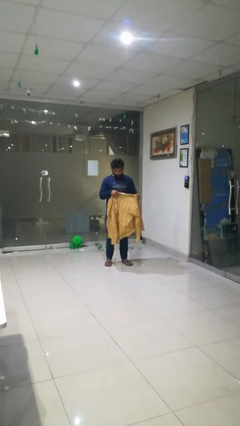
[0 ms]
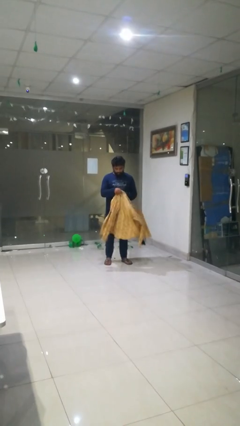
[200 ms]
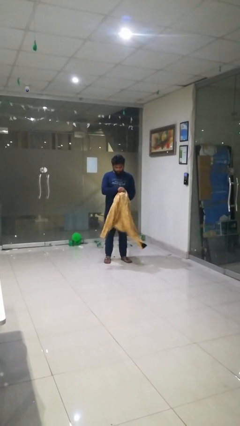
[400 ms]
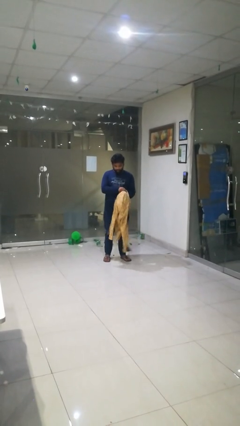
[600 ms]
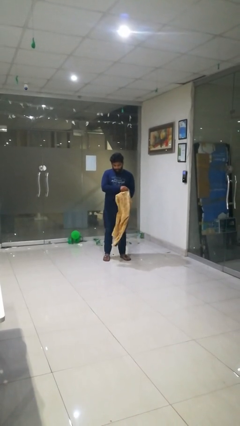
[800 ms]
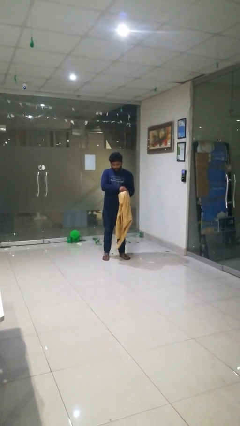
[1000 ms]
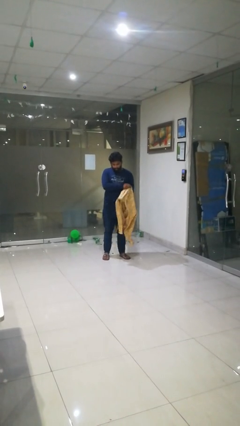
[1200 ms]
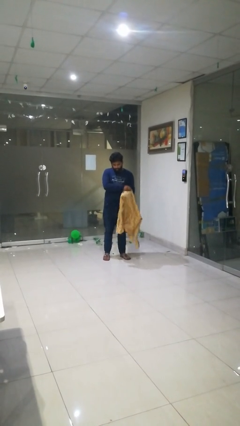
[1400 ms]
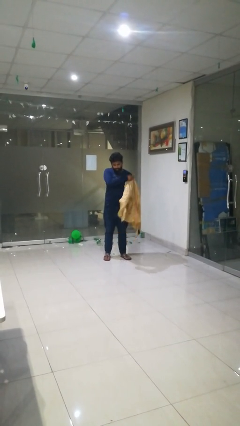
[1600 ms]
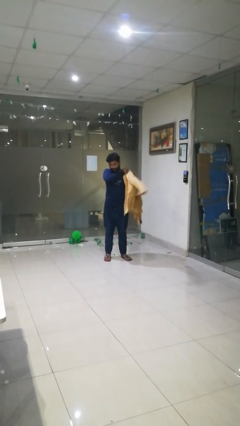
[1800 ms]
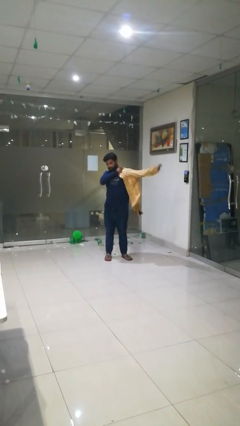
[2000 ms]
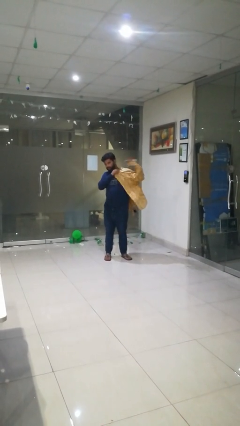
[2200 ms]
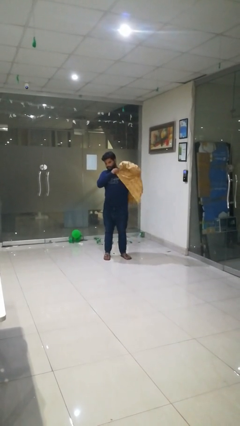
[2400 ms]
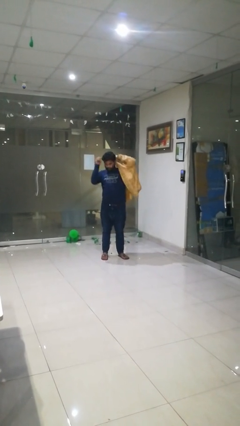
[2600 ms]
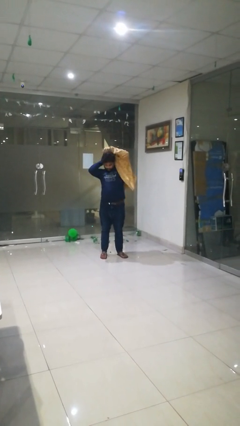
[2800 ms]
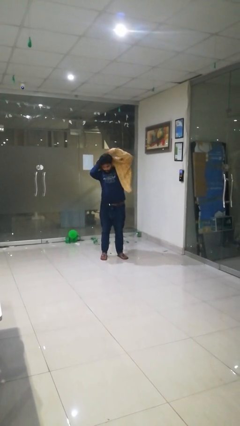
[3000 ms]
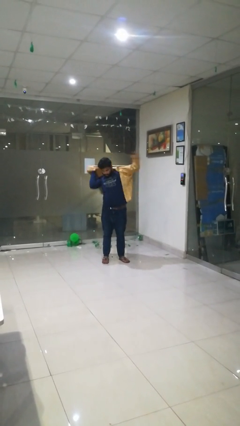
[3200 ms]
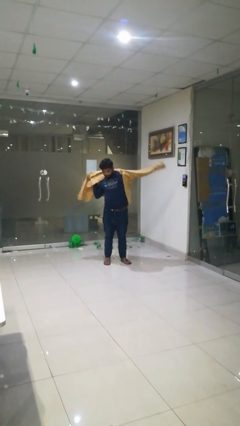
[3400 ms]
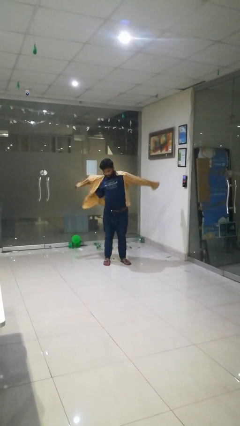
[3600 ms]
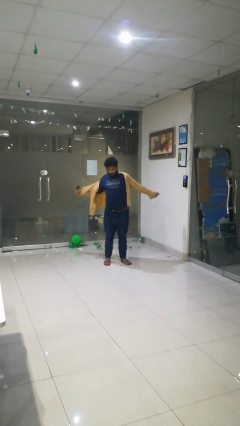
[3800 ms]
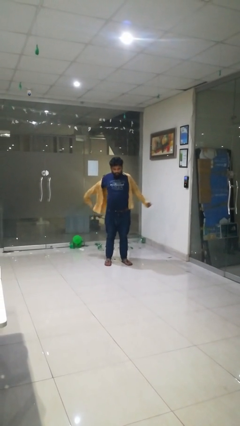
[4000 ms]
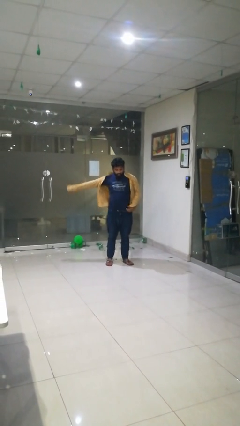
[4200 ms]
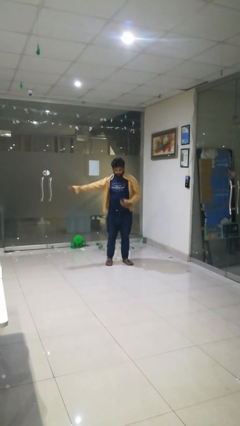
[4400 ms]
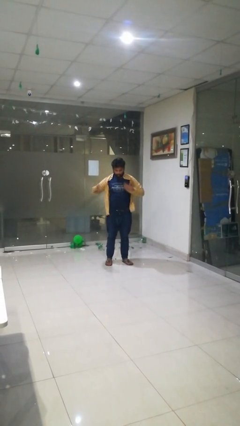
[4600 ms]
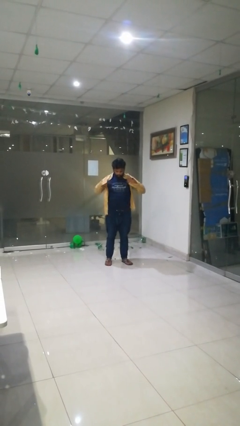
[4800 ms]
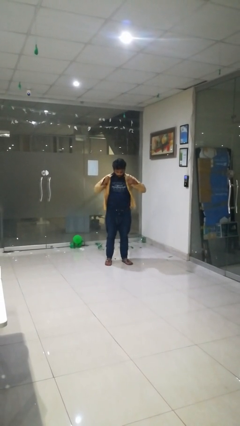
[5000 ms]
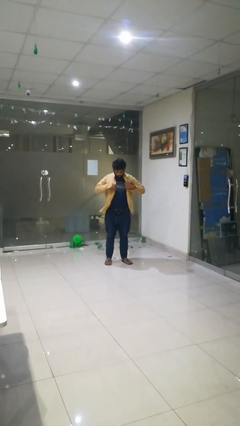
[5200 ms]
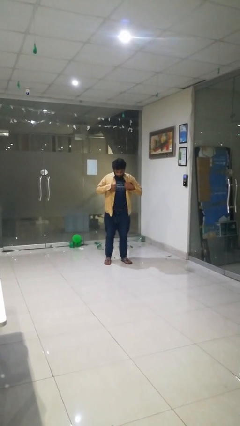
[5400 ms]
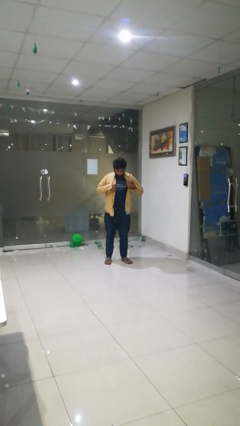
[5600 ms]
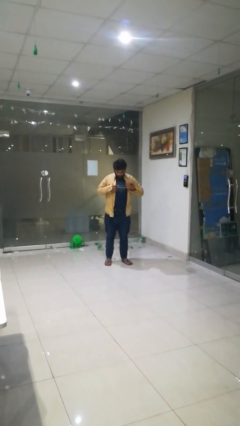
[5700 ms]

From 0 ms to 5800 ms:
person puts on shirt

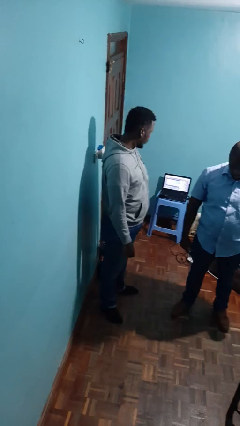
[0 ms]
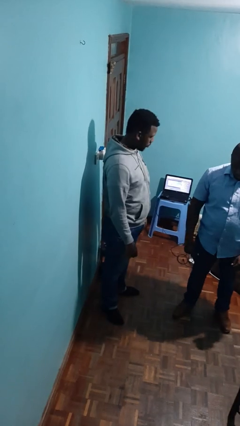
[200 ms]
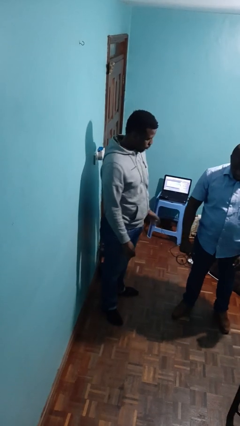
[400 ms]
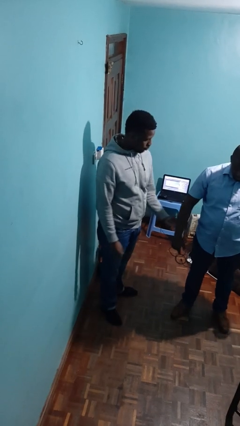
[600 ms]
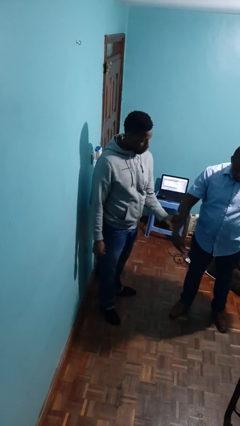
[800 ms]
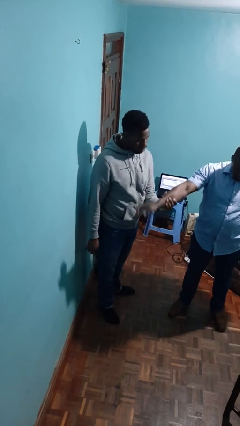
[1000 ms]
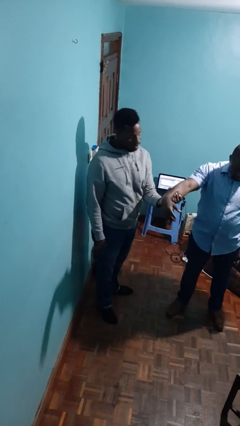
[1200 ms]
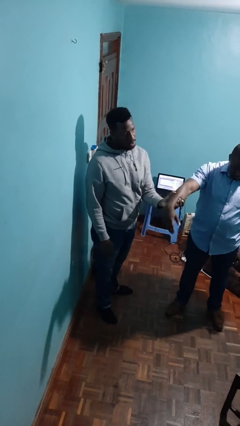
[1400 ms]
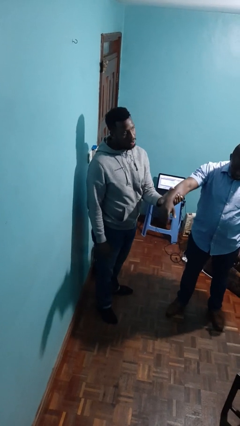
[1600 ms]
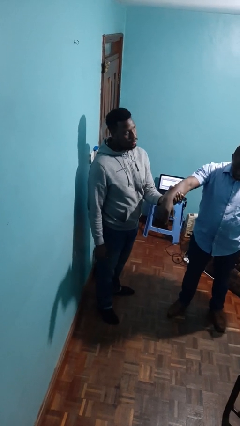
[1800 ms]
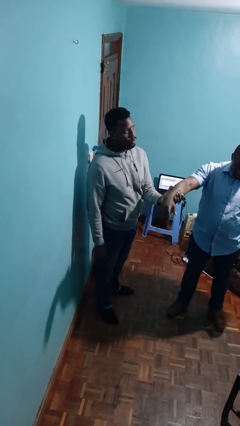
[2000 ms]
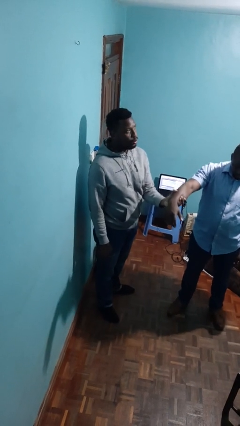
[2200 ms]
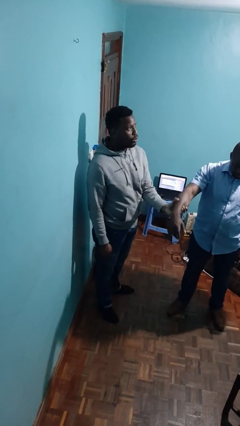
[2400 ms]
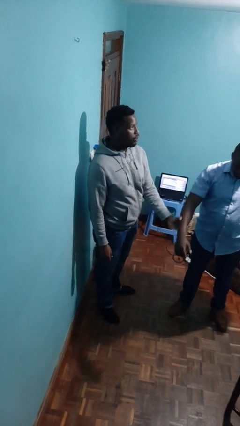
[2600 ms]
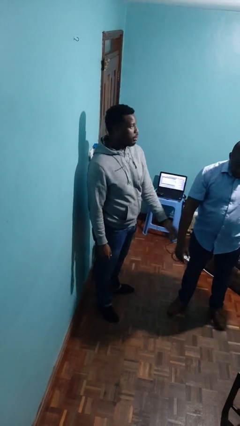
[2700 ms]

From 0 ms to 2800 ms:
person grabs person by forearm

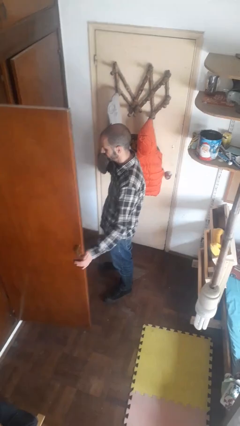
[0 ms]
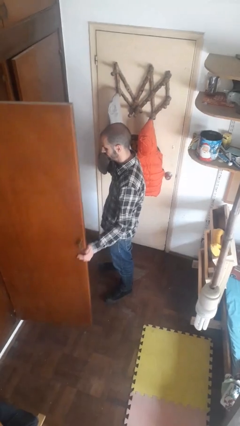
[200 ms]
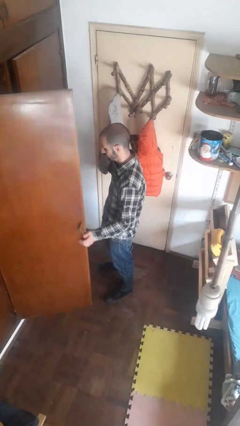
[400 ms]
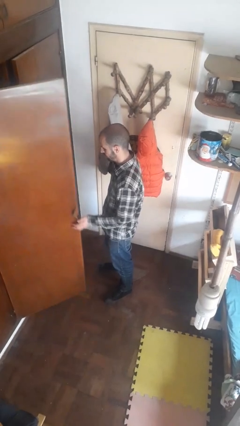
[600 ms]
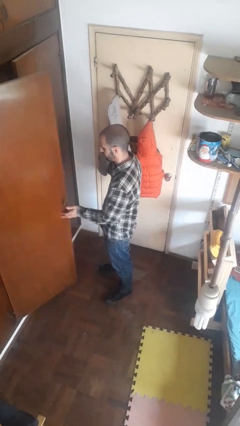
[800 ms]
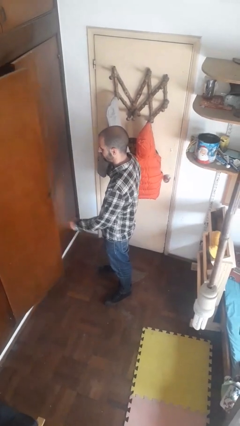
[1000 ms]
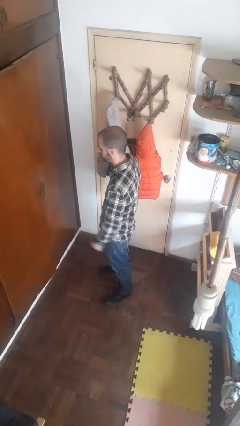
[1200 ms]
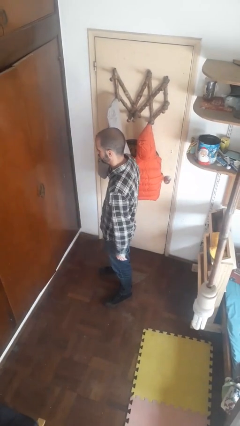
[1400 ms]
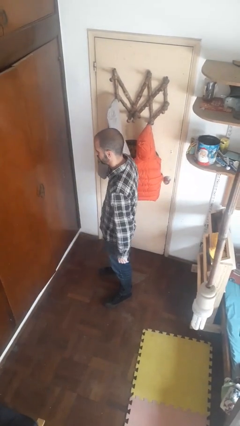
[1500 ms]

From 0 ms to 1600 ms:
person closes closet door

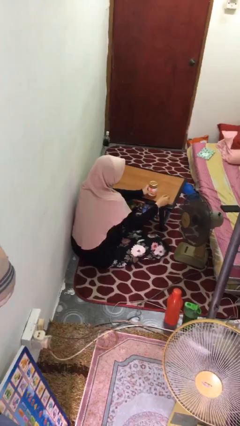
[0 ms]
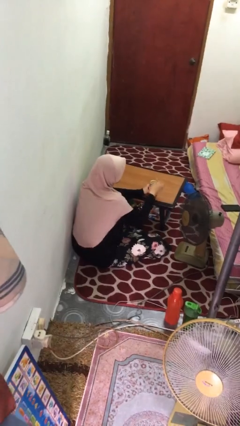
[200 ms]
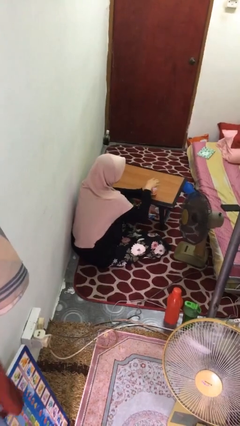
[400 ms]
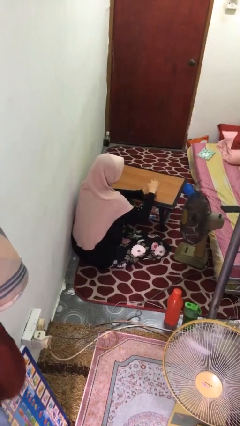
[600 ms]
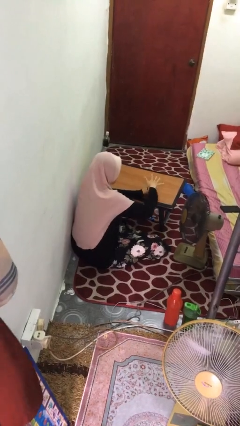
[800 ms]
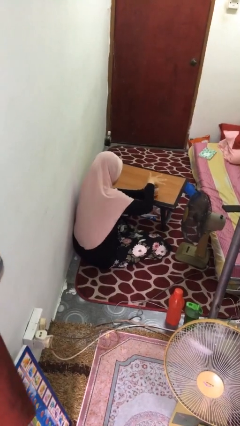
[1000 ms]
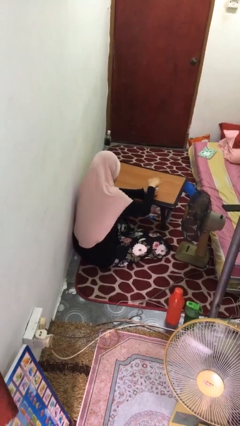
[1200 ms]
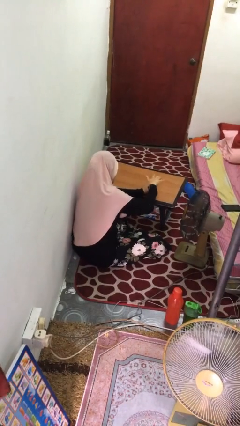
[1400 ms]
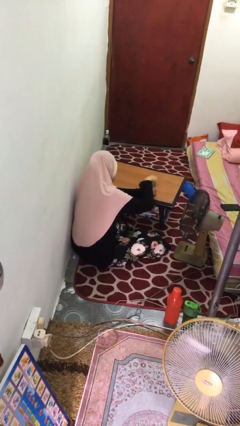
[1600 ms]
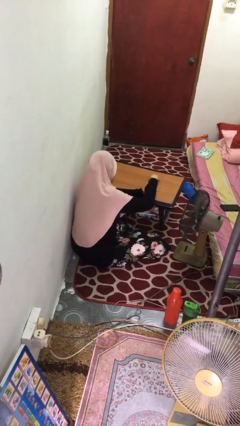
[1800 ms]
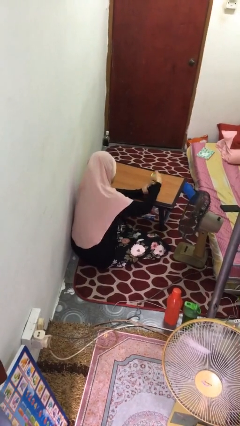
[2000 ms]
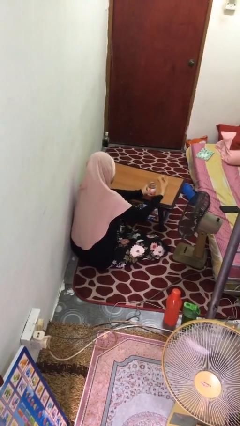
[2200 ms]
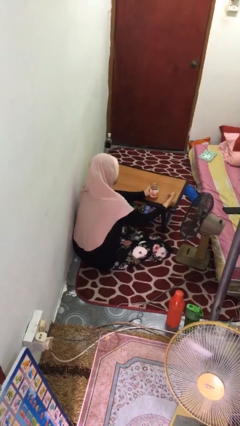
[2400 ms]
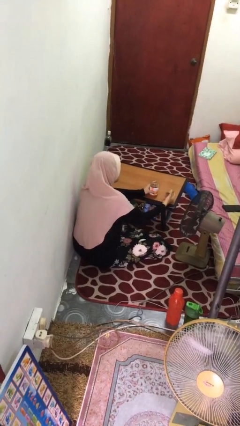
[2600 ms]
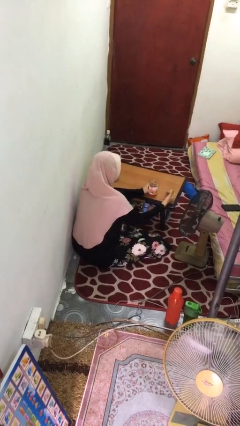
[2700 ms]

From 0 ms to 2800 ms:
person opens jar

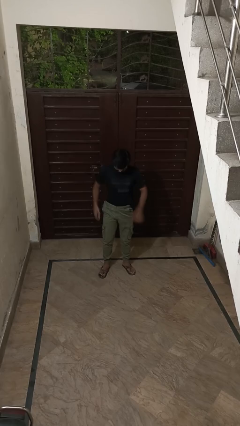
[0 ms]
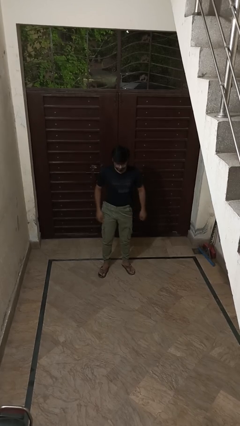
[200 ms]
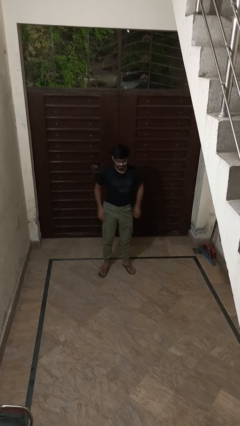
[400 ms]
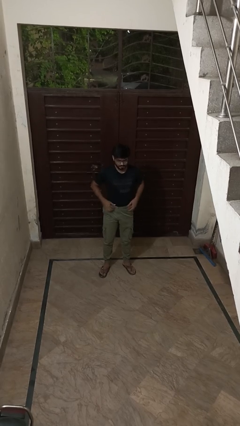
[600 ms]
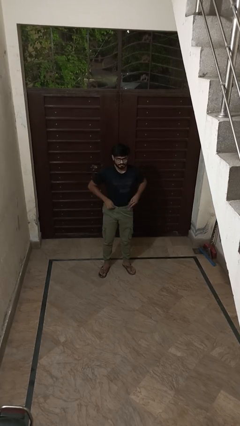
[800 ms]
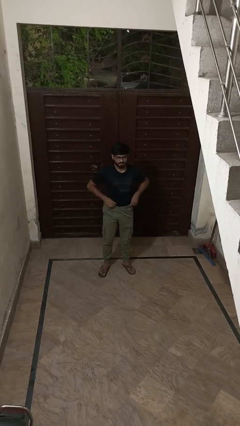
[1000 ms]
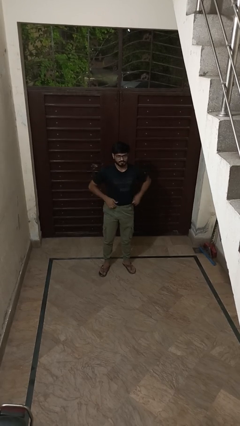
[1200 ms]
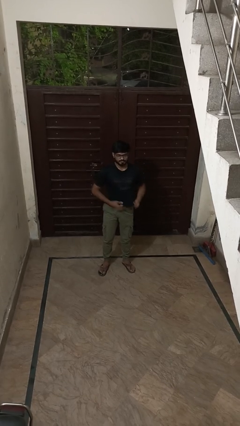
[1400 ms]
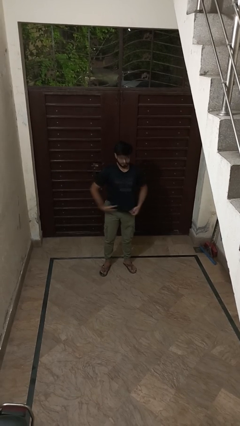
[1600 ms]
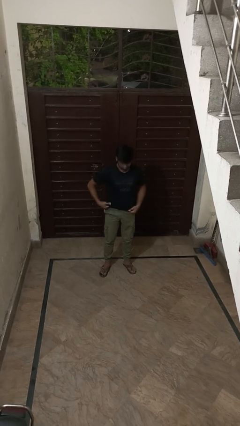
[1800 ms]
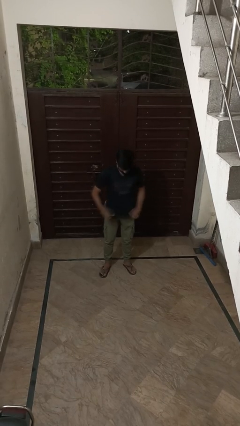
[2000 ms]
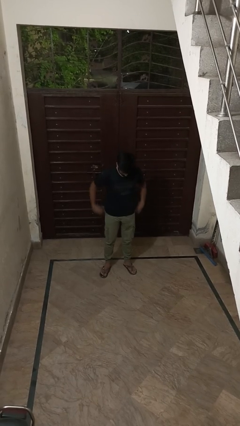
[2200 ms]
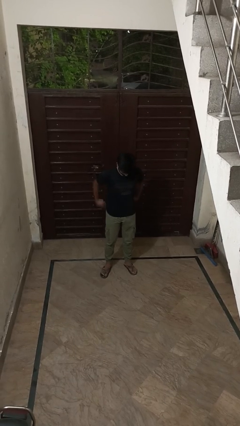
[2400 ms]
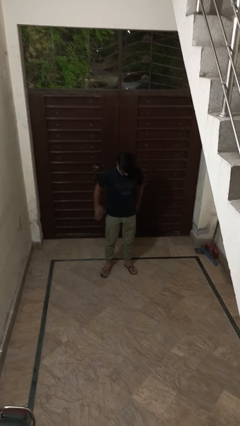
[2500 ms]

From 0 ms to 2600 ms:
person untucks shirt

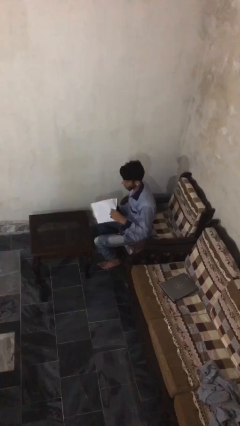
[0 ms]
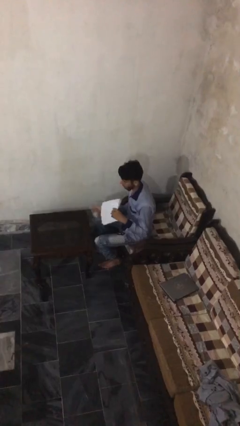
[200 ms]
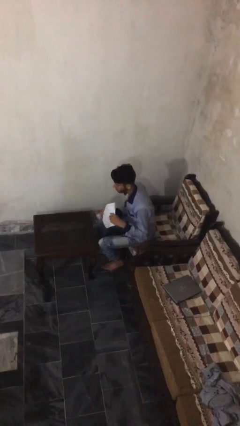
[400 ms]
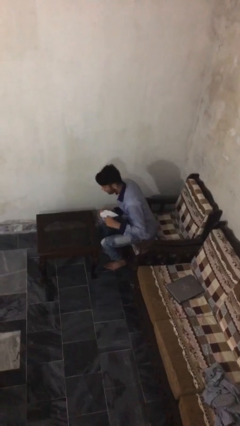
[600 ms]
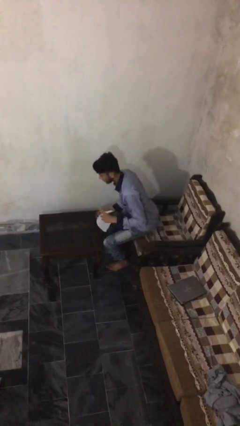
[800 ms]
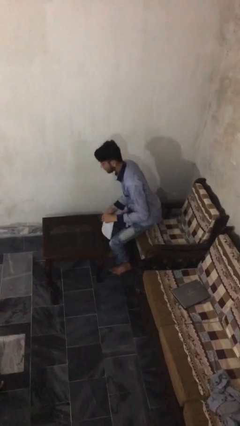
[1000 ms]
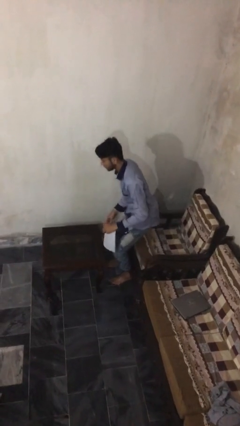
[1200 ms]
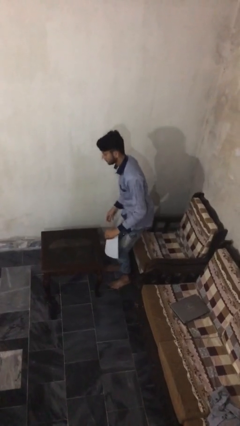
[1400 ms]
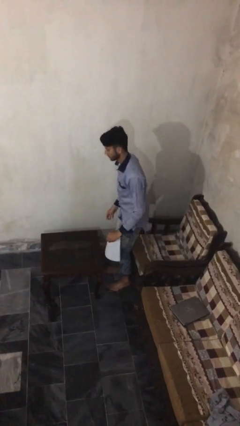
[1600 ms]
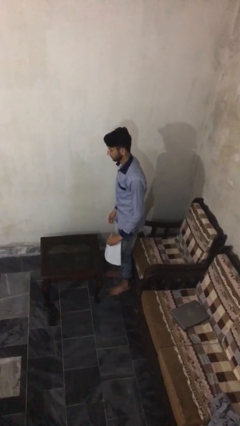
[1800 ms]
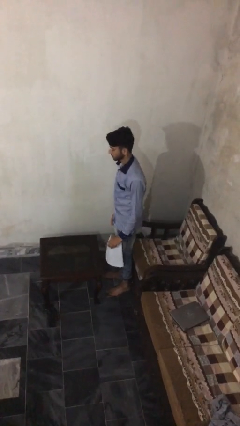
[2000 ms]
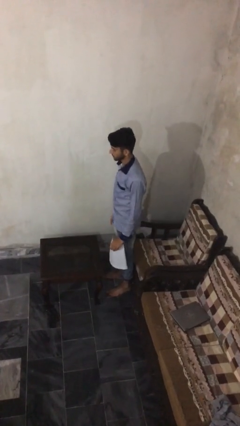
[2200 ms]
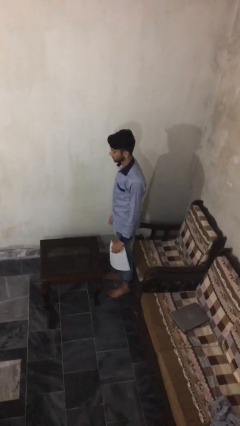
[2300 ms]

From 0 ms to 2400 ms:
person stands up
